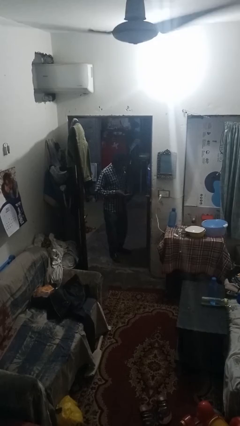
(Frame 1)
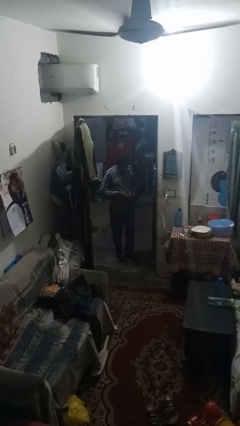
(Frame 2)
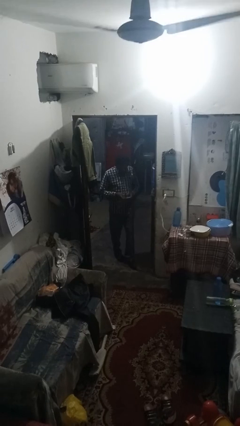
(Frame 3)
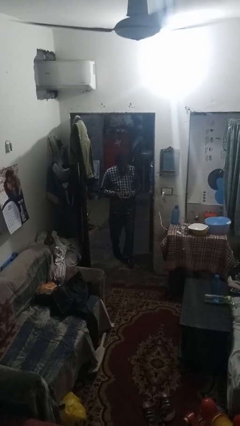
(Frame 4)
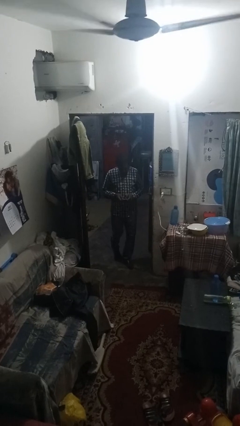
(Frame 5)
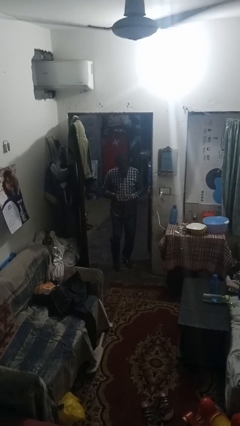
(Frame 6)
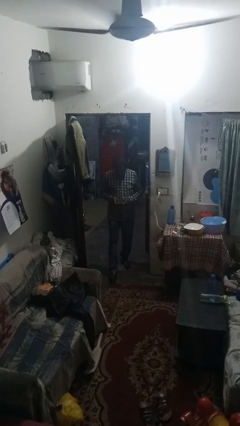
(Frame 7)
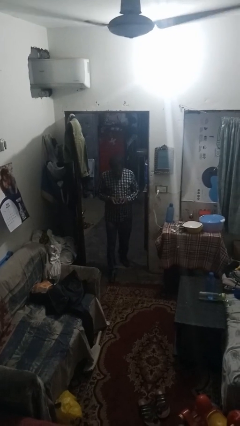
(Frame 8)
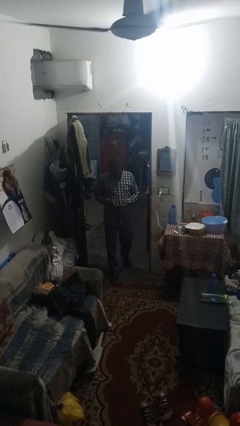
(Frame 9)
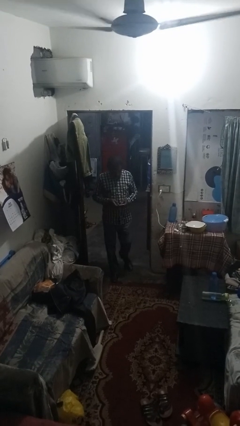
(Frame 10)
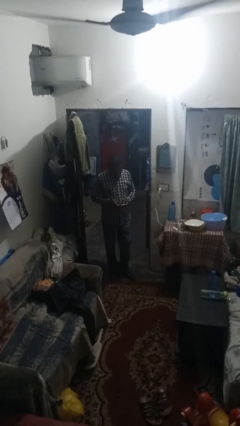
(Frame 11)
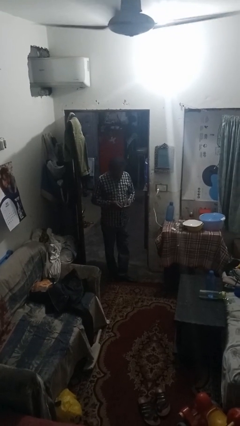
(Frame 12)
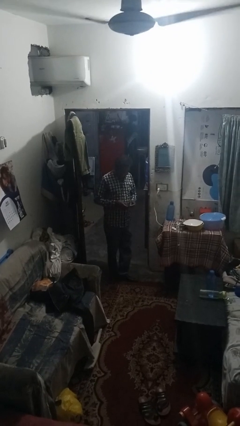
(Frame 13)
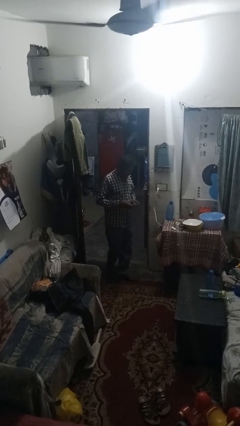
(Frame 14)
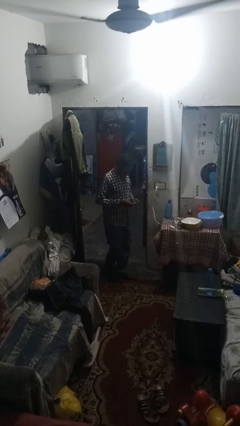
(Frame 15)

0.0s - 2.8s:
person enters scene through structure

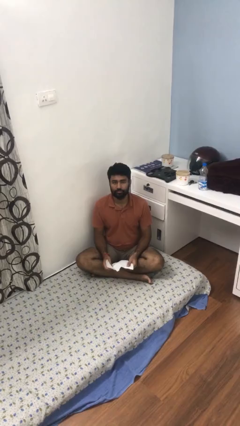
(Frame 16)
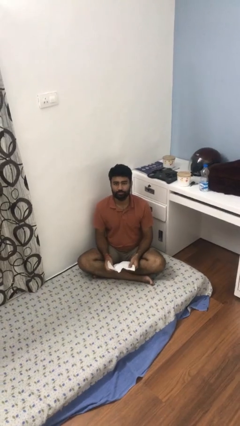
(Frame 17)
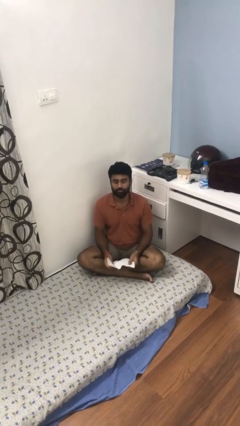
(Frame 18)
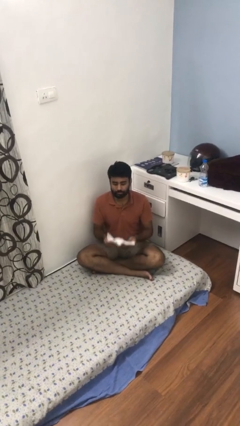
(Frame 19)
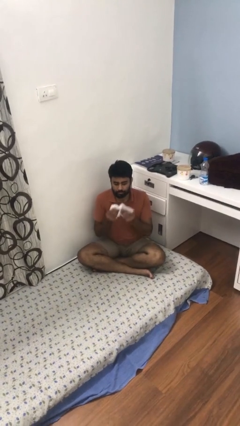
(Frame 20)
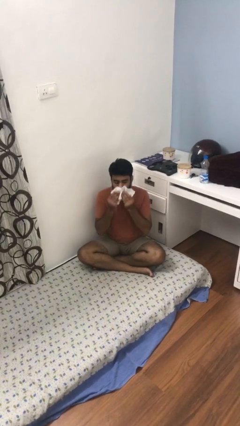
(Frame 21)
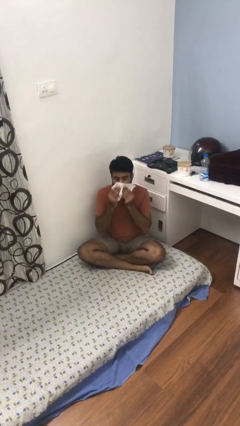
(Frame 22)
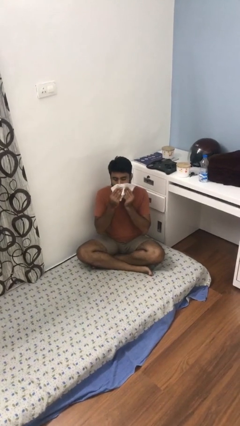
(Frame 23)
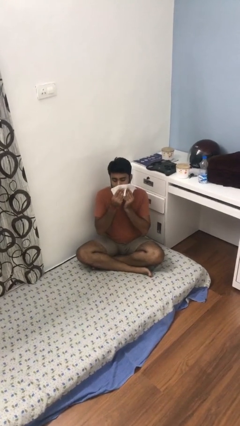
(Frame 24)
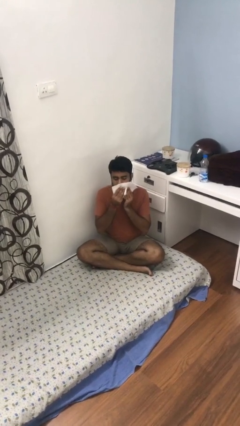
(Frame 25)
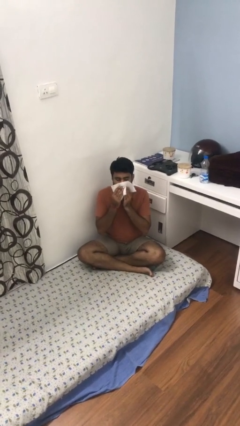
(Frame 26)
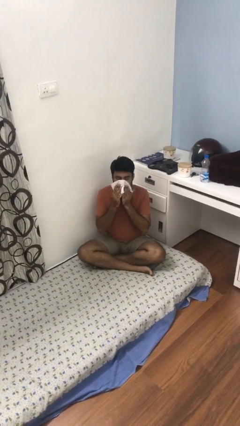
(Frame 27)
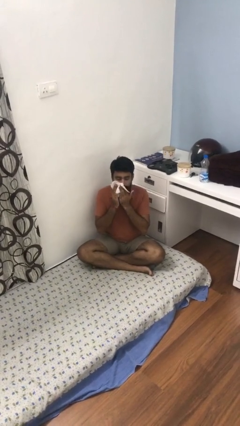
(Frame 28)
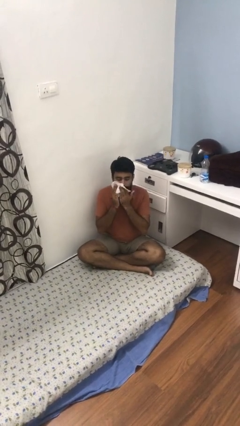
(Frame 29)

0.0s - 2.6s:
person wipes mouth with napkin

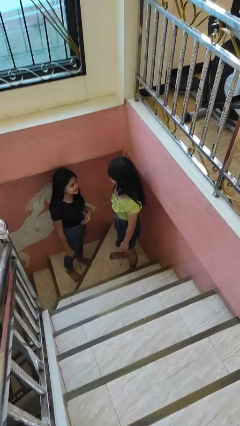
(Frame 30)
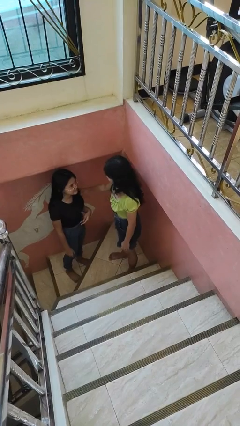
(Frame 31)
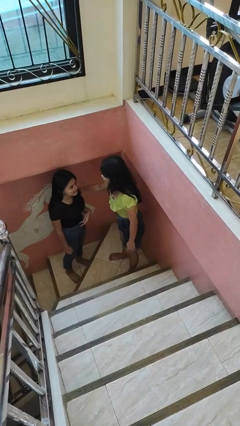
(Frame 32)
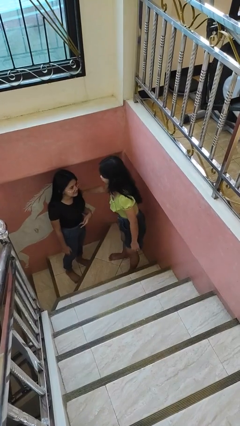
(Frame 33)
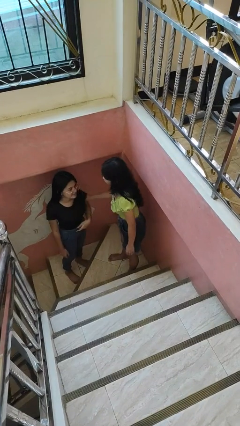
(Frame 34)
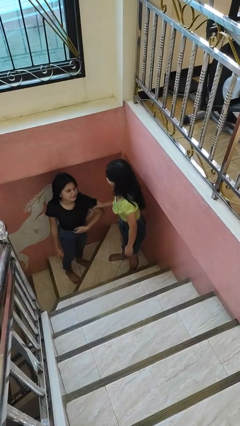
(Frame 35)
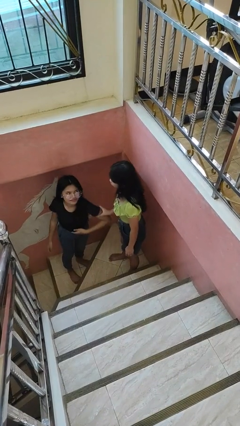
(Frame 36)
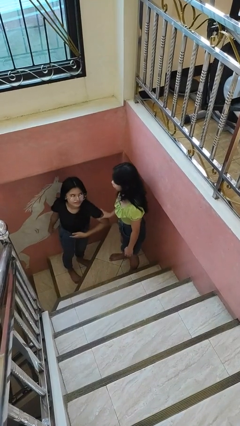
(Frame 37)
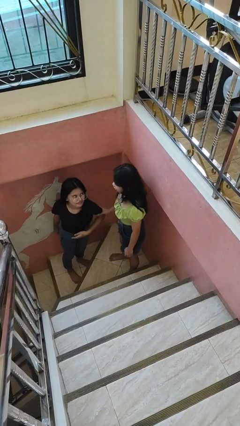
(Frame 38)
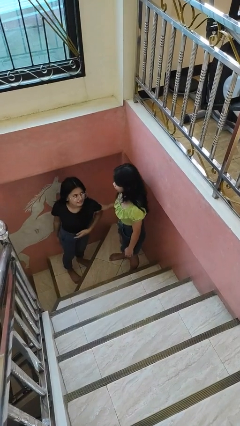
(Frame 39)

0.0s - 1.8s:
person grabs person by bicep

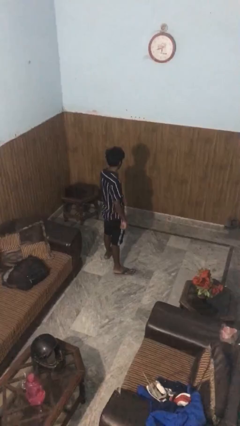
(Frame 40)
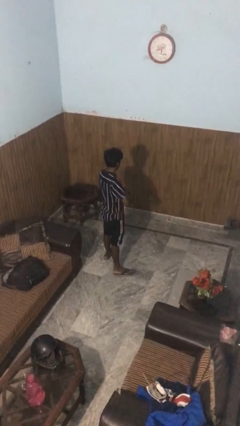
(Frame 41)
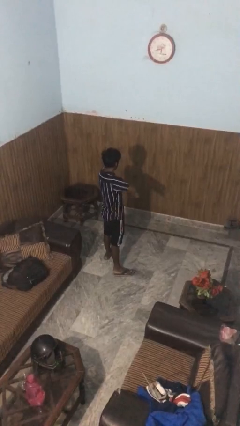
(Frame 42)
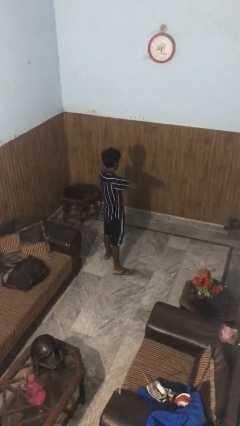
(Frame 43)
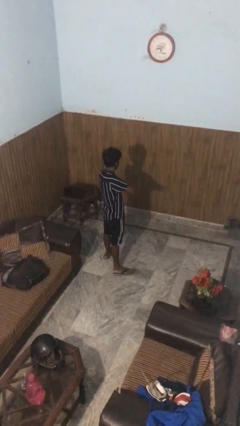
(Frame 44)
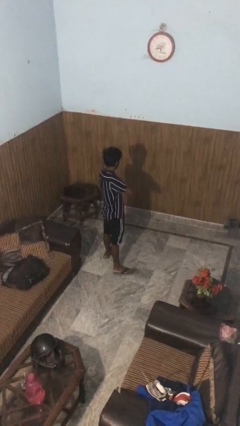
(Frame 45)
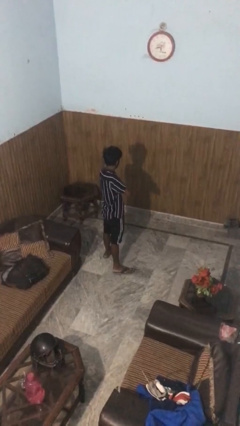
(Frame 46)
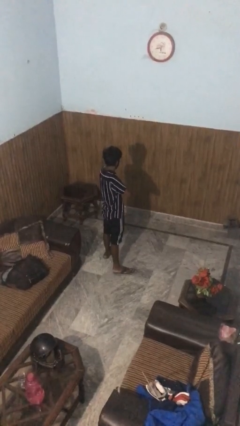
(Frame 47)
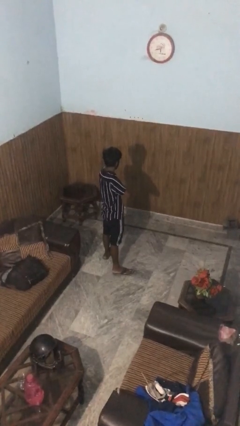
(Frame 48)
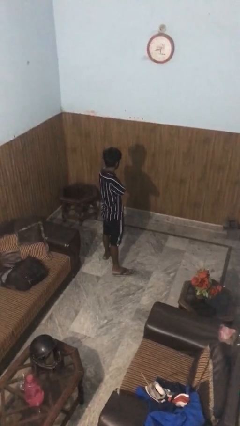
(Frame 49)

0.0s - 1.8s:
person crosses arms

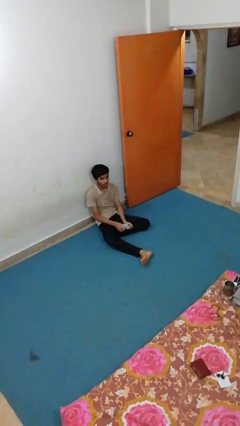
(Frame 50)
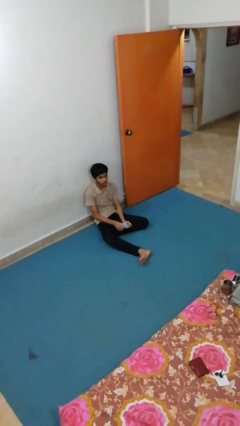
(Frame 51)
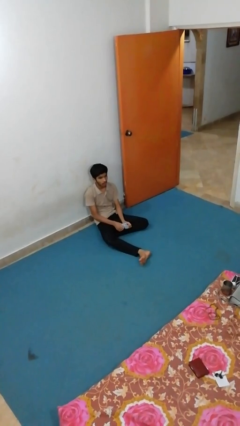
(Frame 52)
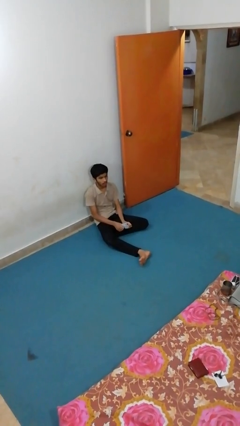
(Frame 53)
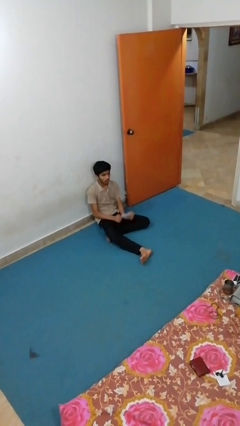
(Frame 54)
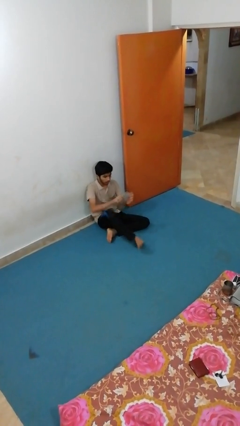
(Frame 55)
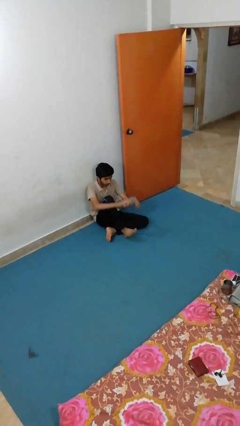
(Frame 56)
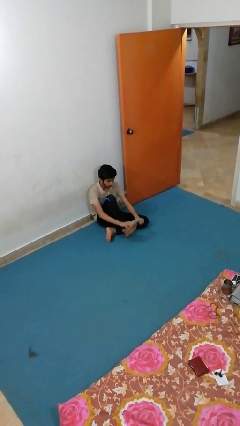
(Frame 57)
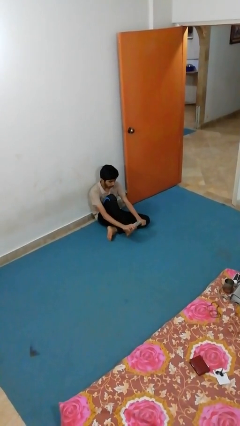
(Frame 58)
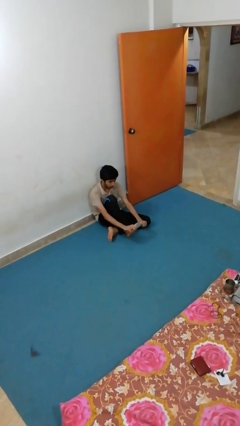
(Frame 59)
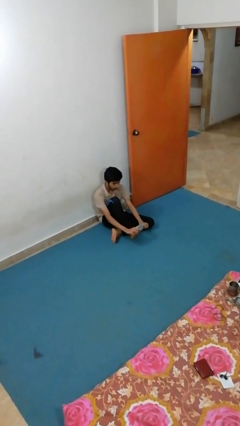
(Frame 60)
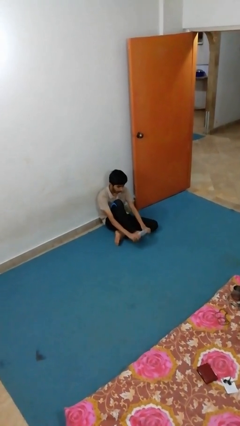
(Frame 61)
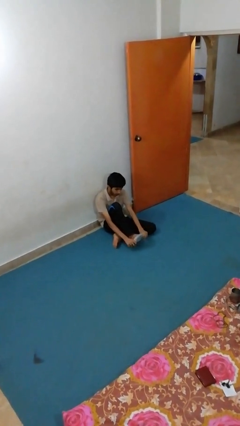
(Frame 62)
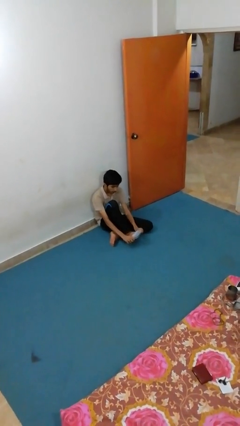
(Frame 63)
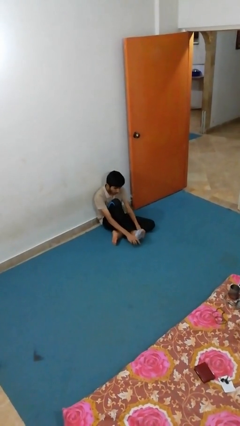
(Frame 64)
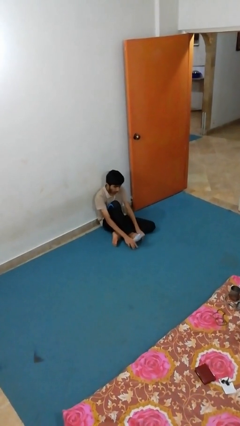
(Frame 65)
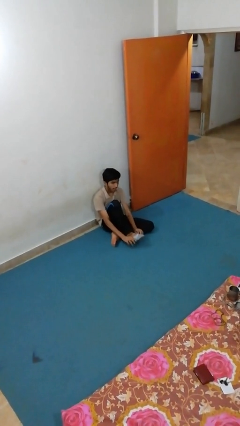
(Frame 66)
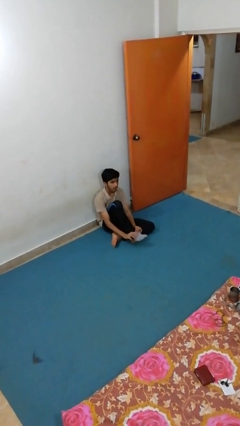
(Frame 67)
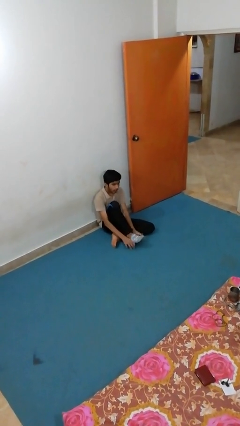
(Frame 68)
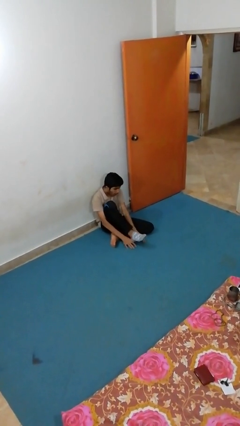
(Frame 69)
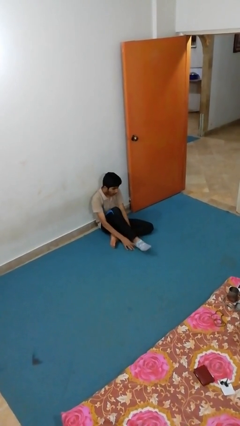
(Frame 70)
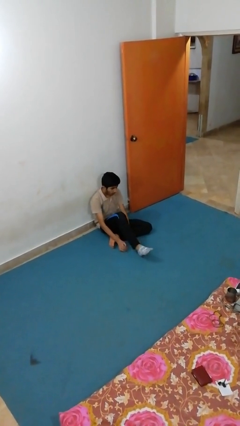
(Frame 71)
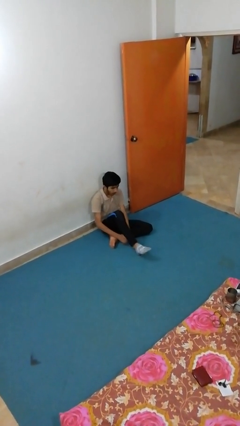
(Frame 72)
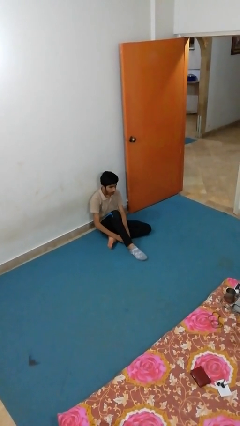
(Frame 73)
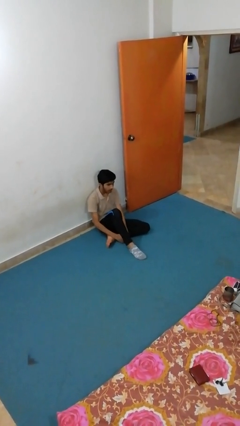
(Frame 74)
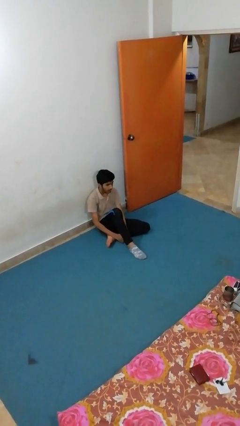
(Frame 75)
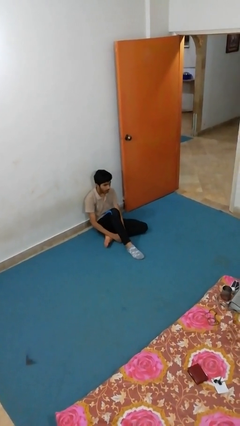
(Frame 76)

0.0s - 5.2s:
person puts on socks

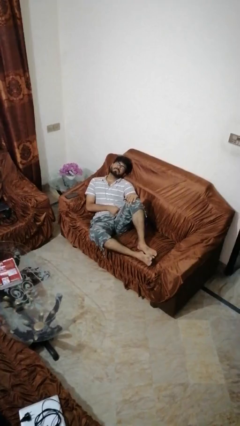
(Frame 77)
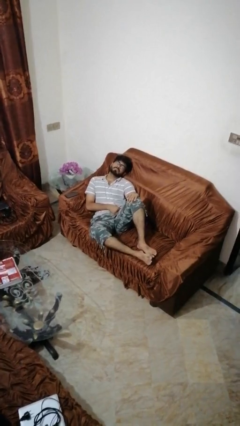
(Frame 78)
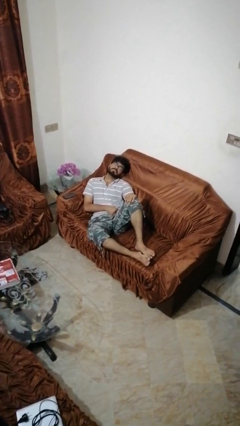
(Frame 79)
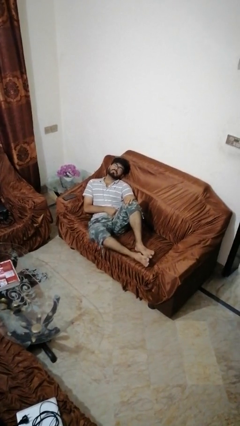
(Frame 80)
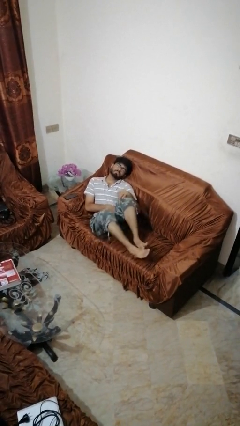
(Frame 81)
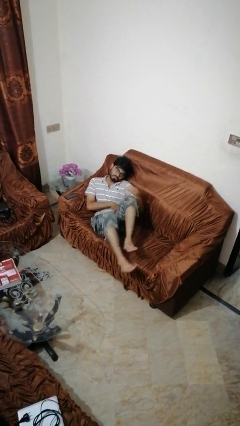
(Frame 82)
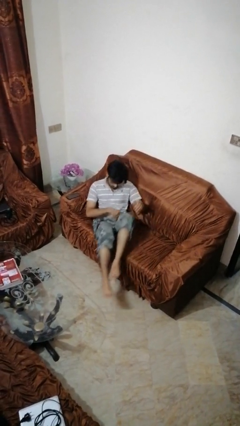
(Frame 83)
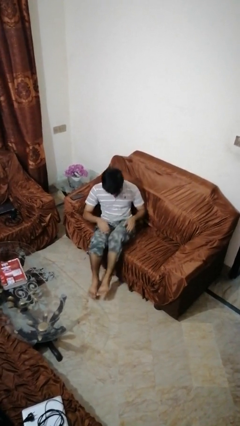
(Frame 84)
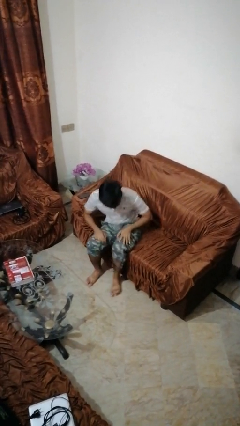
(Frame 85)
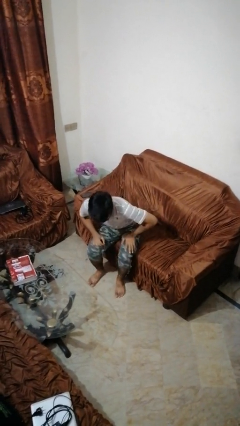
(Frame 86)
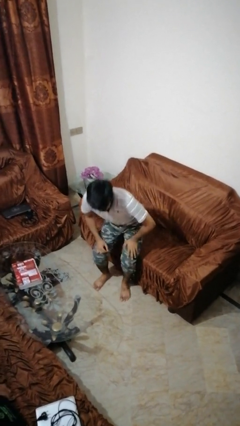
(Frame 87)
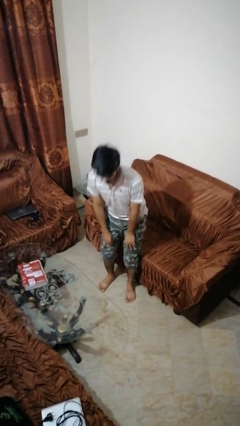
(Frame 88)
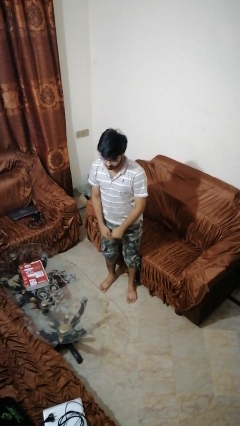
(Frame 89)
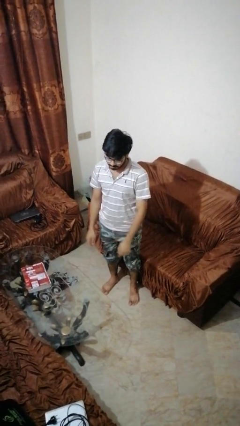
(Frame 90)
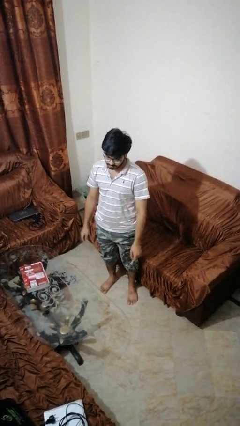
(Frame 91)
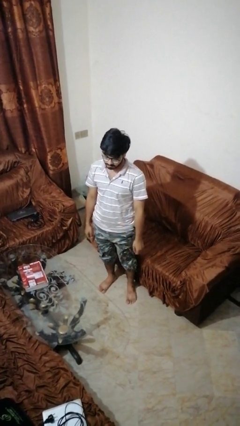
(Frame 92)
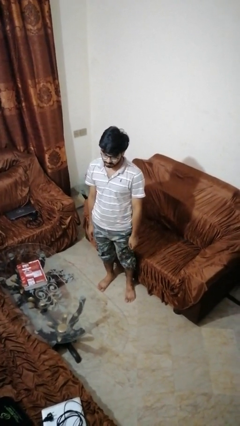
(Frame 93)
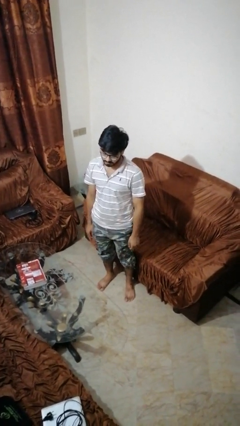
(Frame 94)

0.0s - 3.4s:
person stands up
